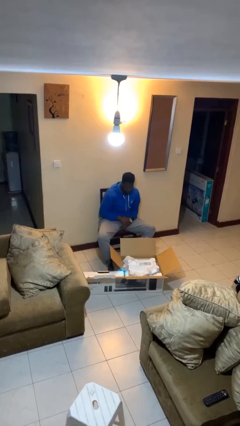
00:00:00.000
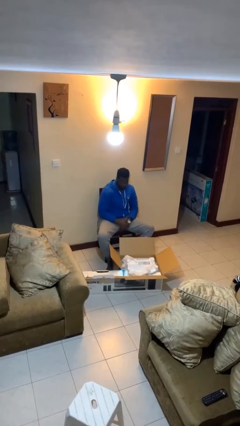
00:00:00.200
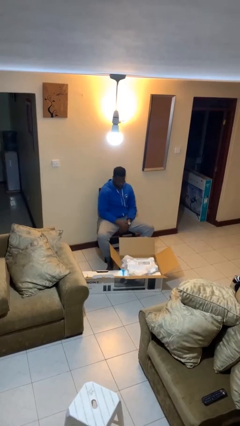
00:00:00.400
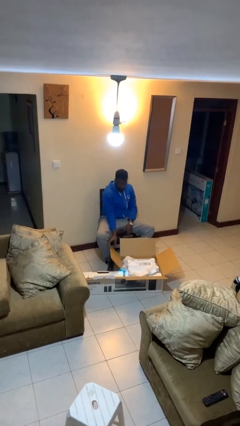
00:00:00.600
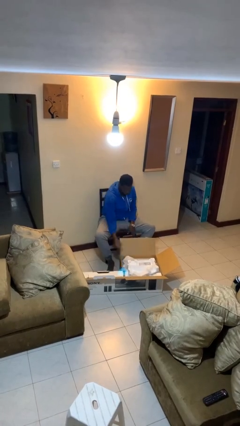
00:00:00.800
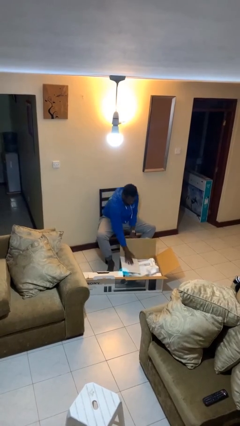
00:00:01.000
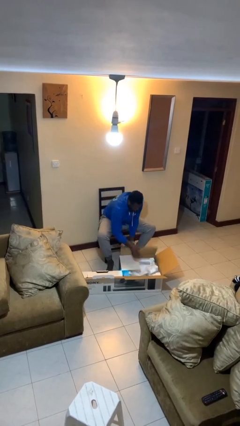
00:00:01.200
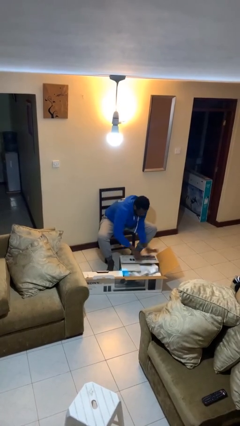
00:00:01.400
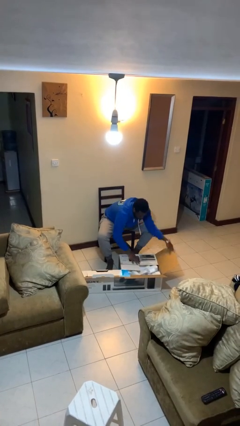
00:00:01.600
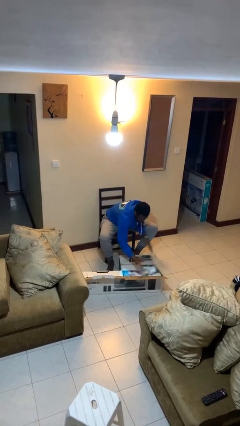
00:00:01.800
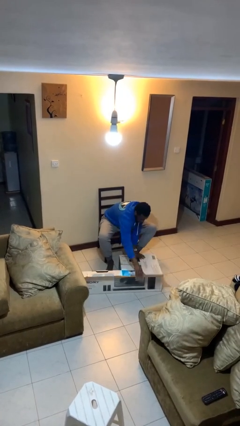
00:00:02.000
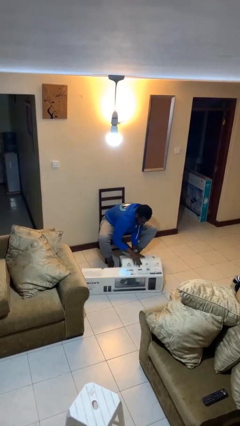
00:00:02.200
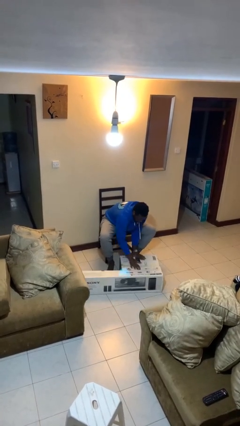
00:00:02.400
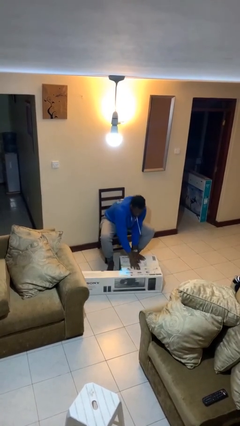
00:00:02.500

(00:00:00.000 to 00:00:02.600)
person closes box

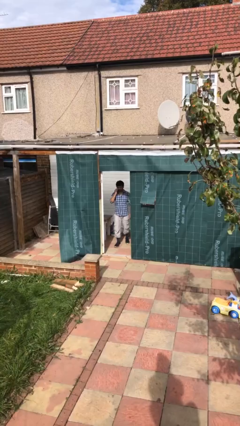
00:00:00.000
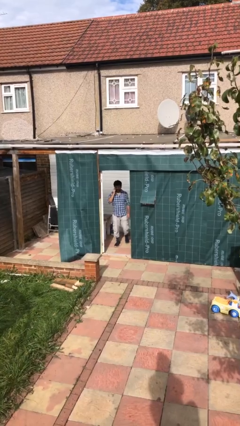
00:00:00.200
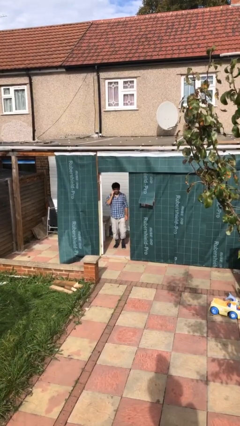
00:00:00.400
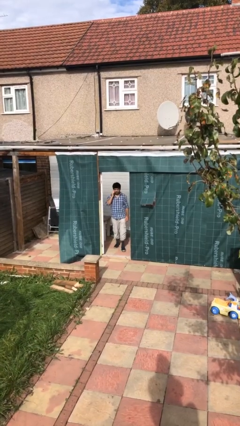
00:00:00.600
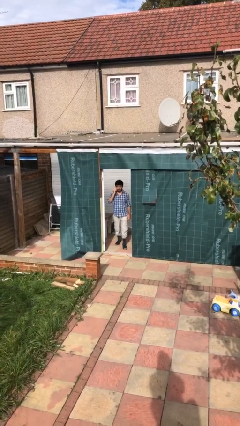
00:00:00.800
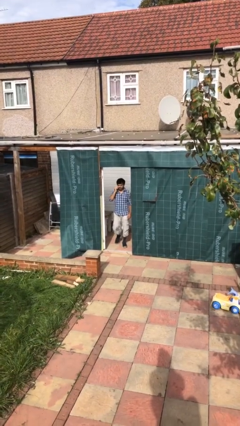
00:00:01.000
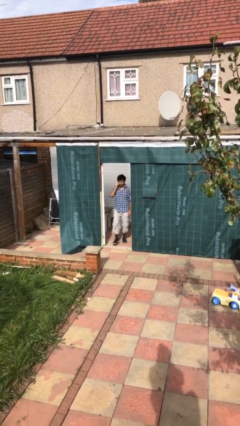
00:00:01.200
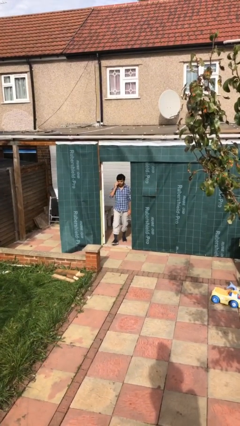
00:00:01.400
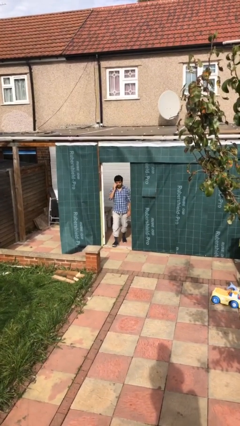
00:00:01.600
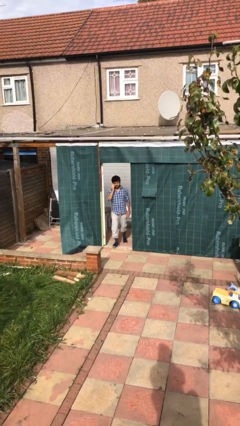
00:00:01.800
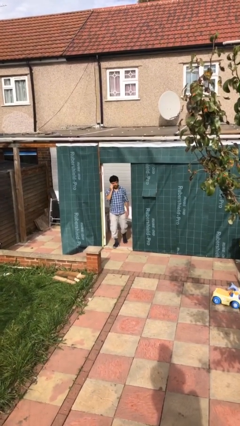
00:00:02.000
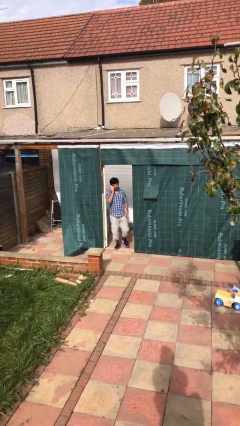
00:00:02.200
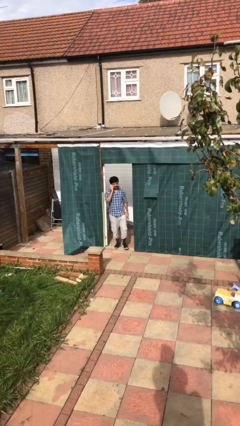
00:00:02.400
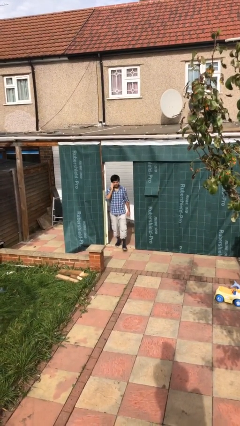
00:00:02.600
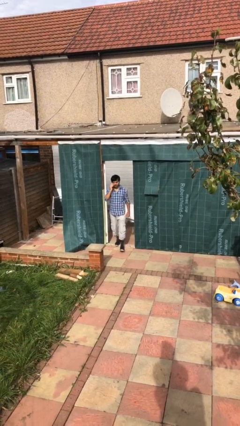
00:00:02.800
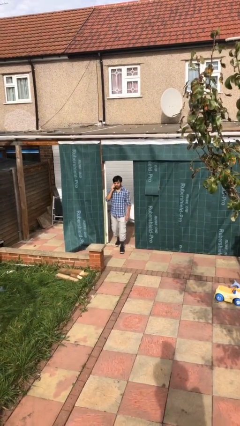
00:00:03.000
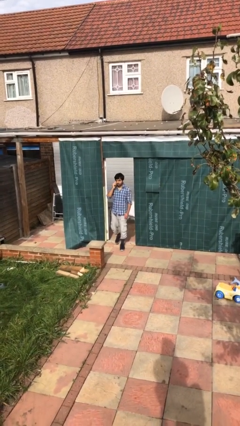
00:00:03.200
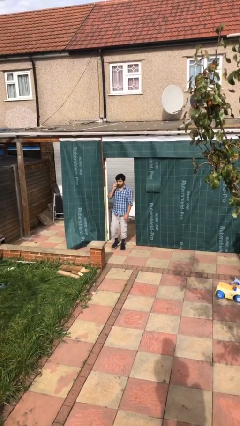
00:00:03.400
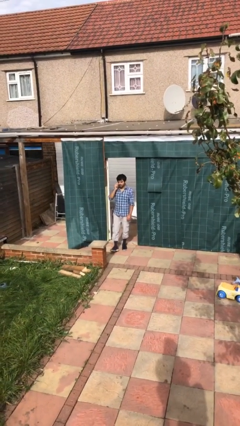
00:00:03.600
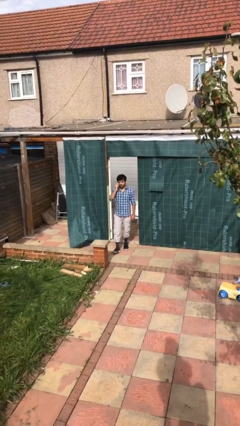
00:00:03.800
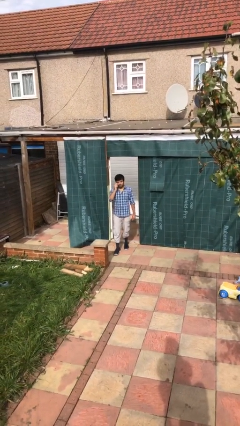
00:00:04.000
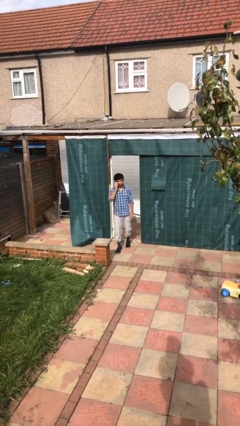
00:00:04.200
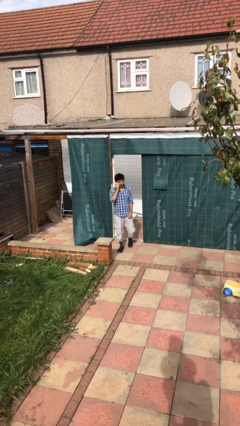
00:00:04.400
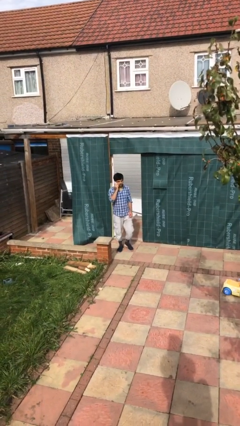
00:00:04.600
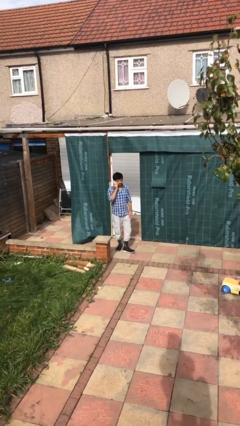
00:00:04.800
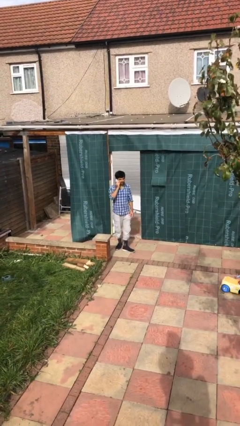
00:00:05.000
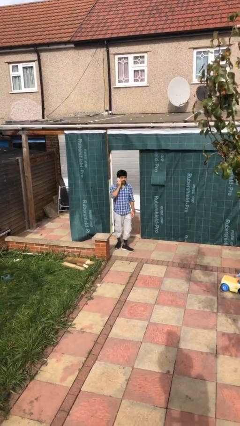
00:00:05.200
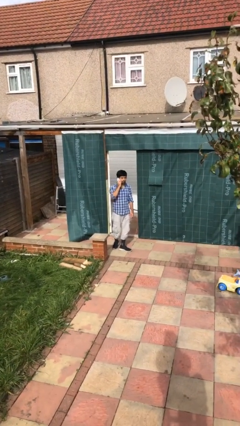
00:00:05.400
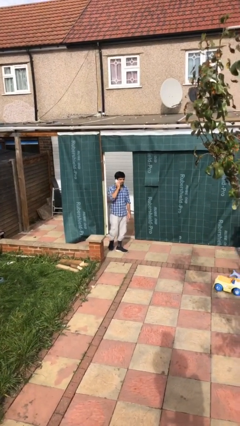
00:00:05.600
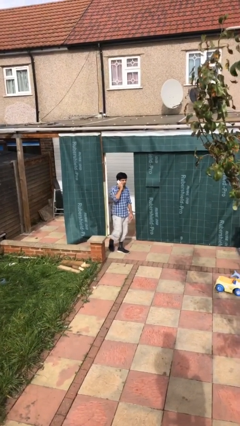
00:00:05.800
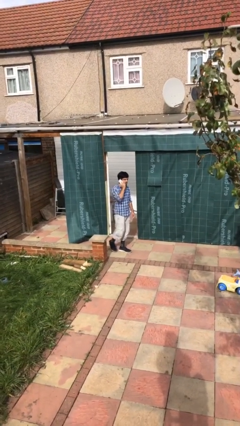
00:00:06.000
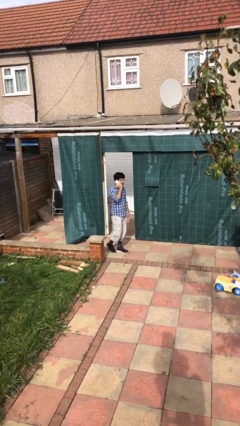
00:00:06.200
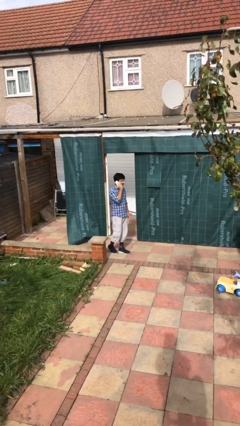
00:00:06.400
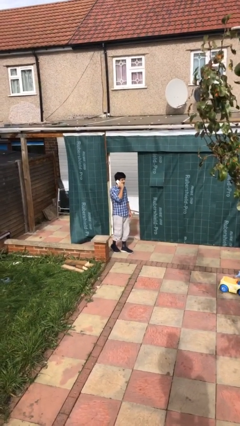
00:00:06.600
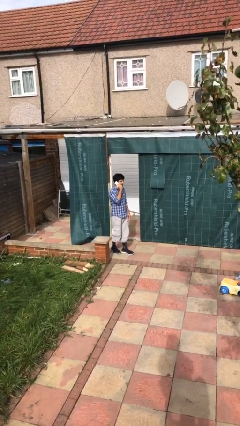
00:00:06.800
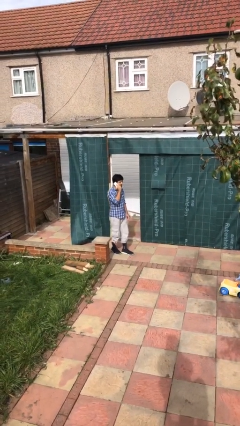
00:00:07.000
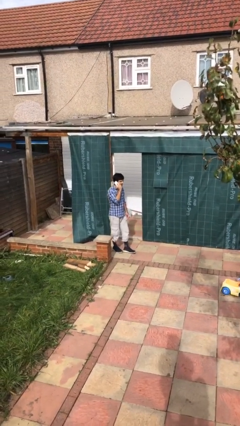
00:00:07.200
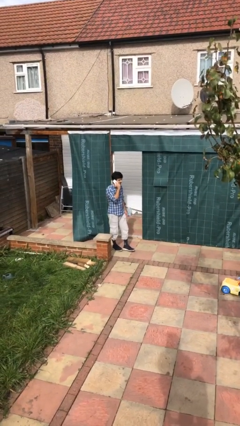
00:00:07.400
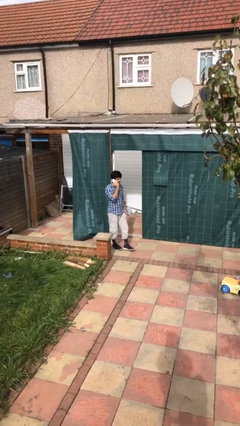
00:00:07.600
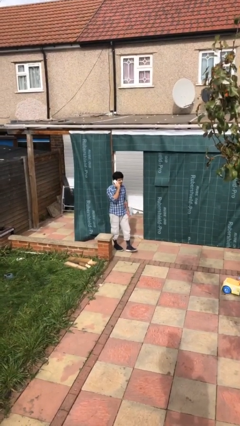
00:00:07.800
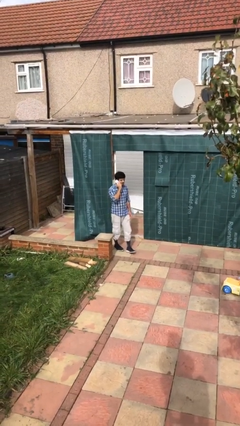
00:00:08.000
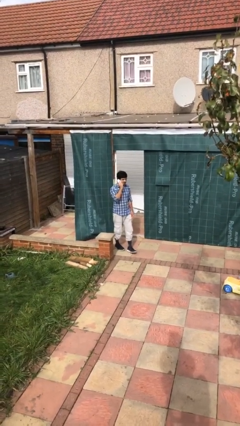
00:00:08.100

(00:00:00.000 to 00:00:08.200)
person enters scene through structure

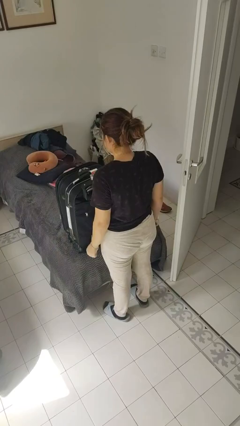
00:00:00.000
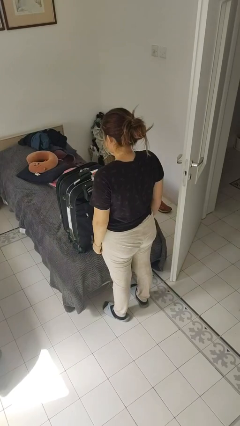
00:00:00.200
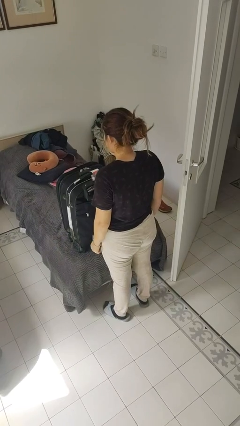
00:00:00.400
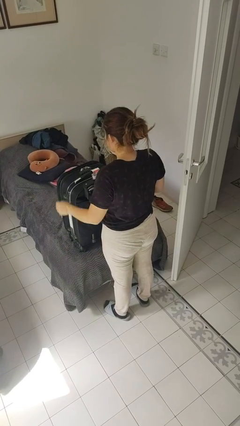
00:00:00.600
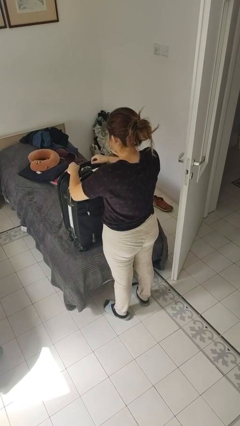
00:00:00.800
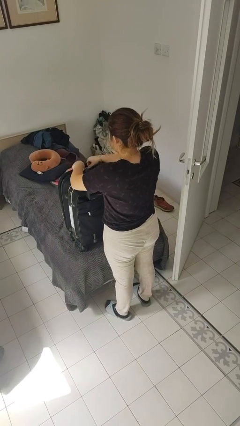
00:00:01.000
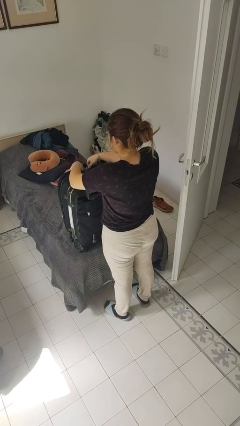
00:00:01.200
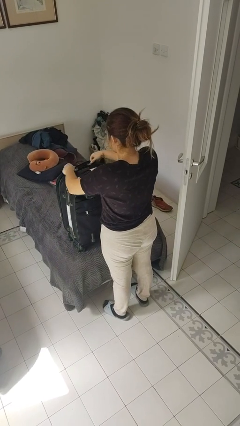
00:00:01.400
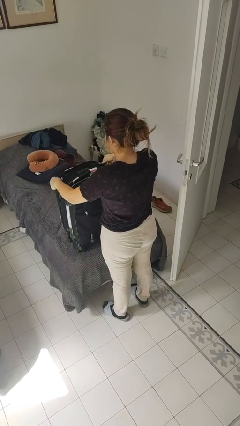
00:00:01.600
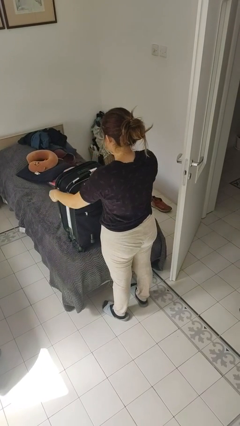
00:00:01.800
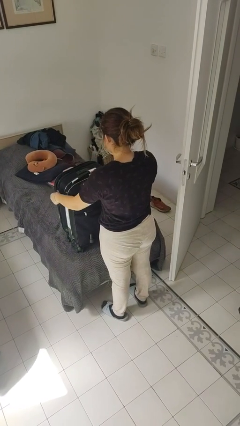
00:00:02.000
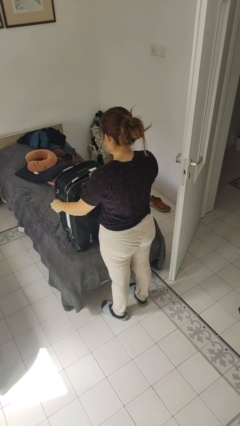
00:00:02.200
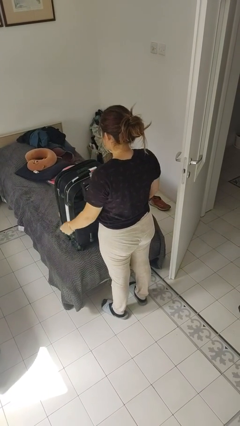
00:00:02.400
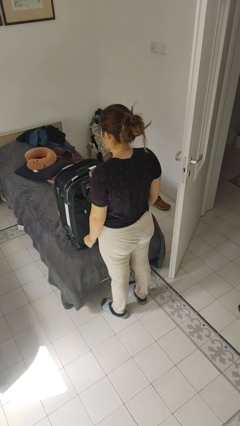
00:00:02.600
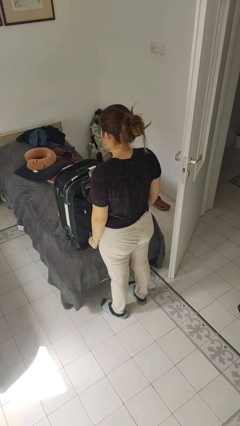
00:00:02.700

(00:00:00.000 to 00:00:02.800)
person opens suitcase

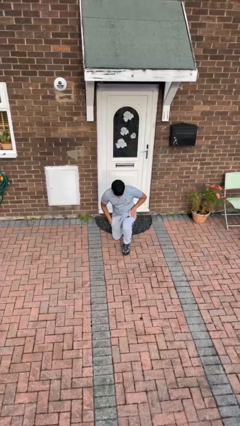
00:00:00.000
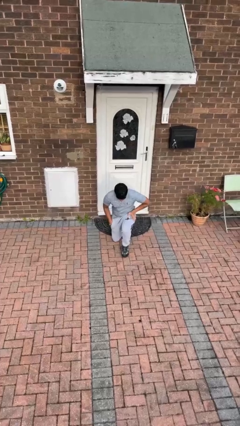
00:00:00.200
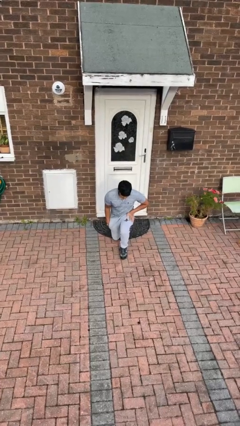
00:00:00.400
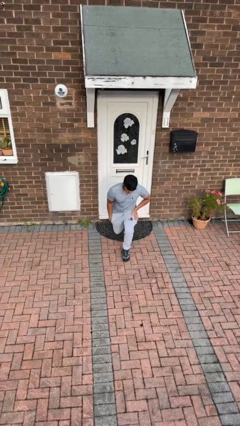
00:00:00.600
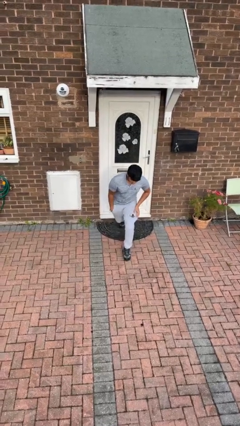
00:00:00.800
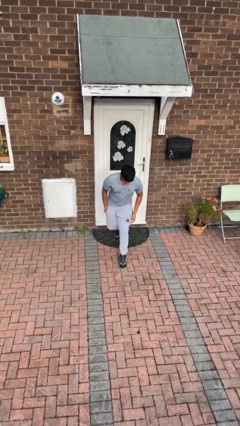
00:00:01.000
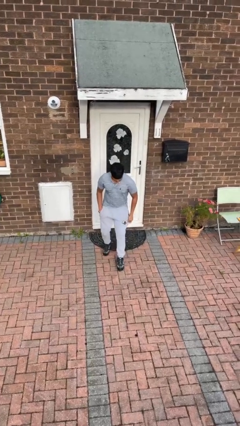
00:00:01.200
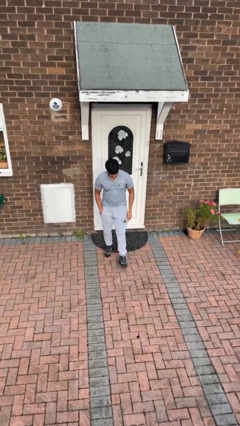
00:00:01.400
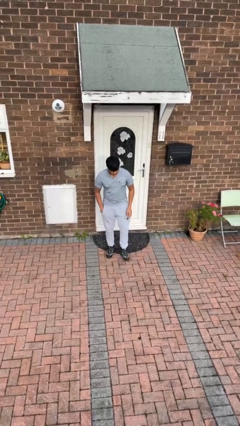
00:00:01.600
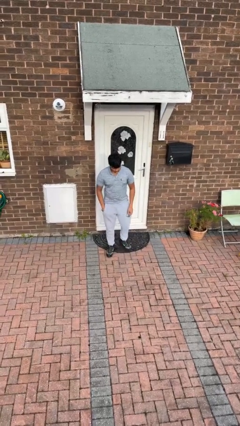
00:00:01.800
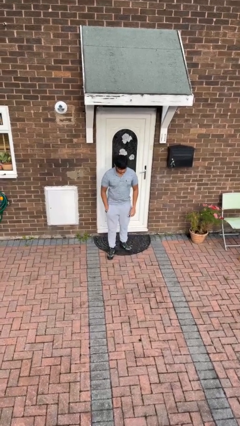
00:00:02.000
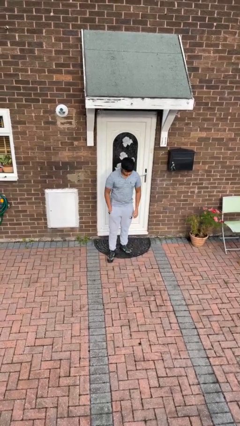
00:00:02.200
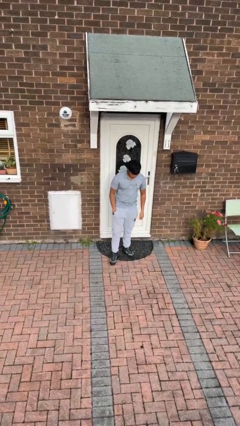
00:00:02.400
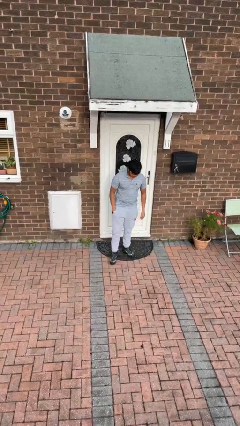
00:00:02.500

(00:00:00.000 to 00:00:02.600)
person stands up from floor

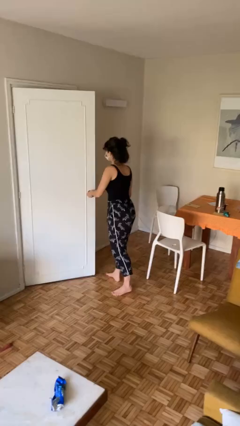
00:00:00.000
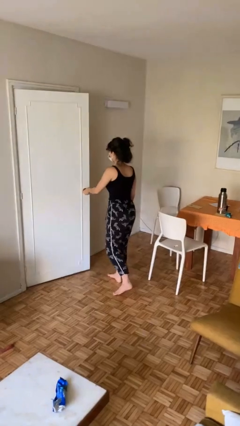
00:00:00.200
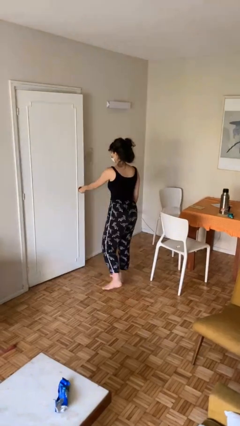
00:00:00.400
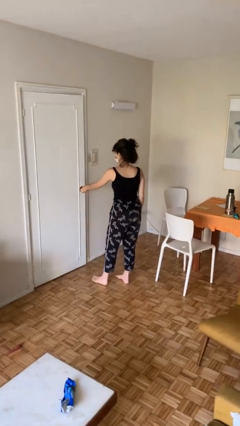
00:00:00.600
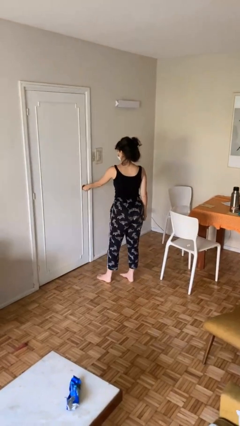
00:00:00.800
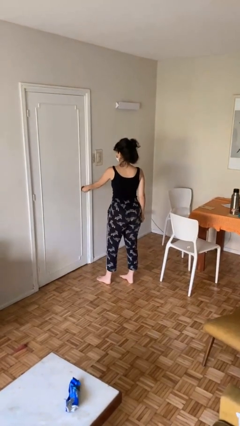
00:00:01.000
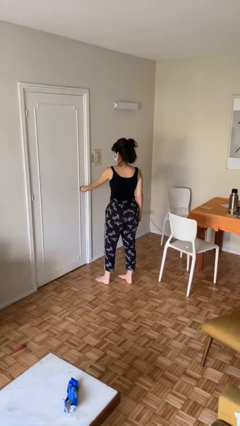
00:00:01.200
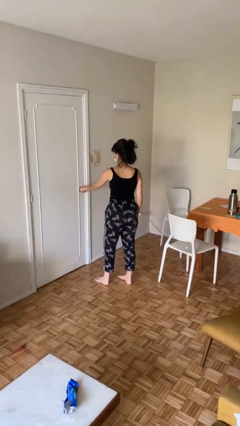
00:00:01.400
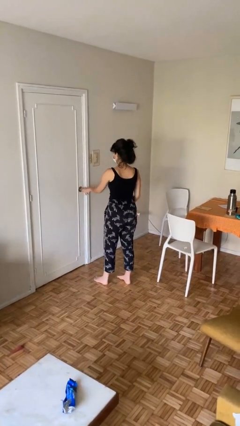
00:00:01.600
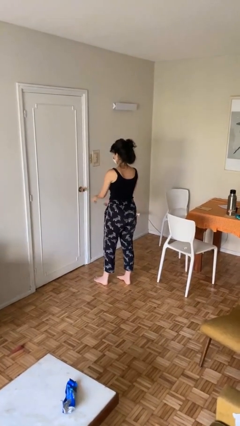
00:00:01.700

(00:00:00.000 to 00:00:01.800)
person closes facility door
